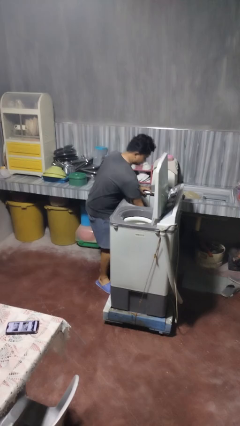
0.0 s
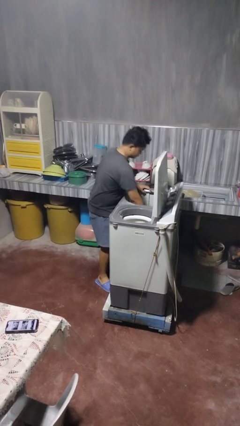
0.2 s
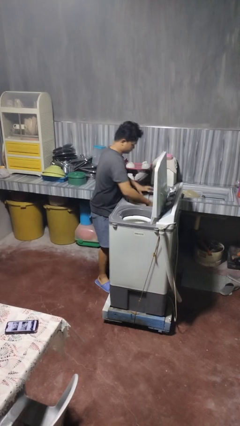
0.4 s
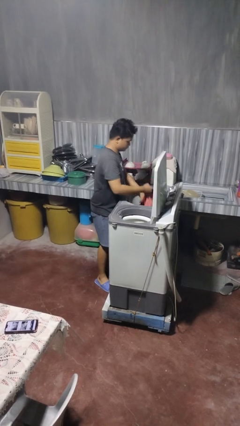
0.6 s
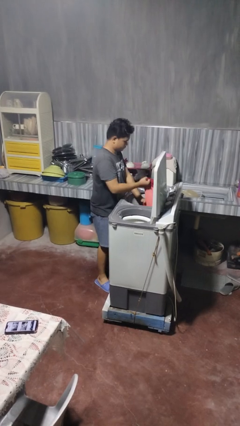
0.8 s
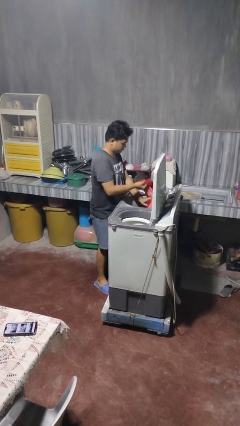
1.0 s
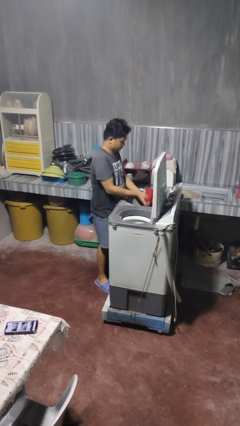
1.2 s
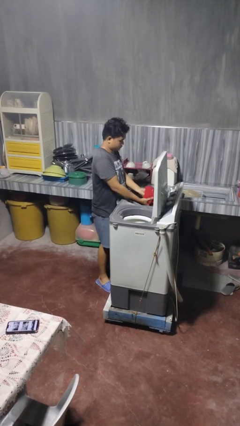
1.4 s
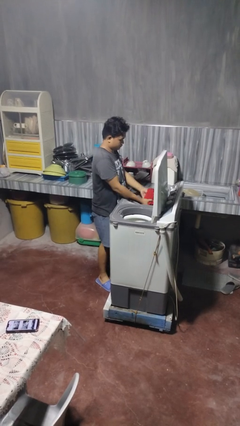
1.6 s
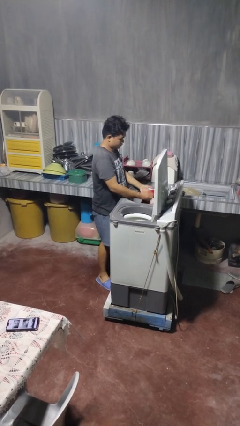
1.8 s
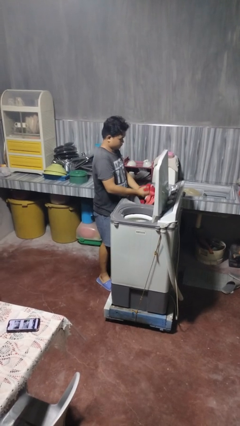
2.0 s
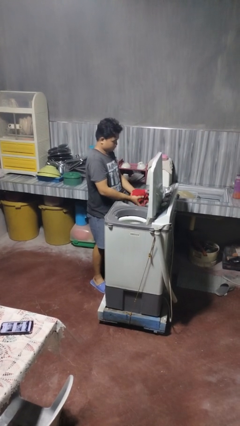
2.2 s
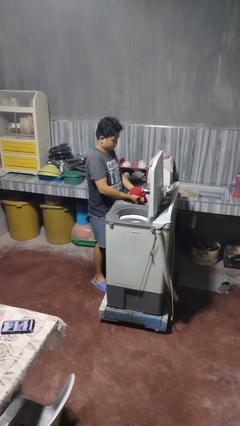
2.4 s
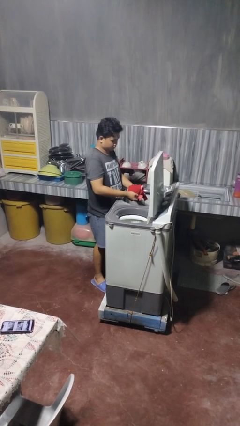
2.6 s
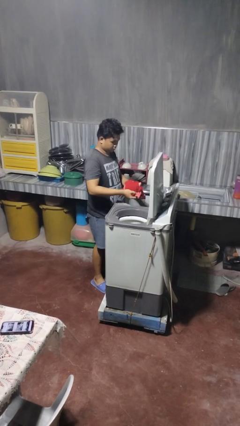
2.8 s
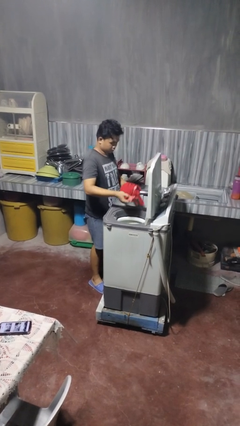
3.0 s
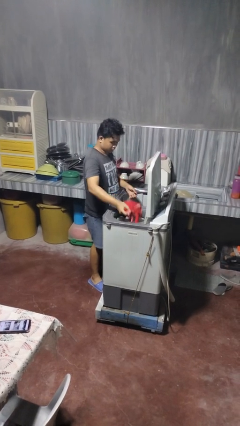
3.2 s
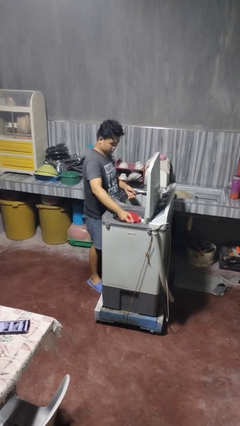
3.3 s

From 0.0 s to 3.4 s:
person unloads clotheswasher

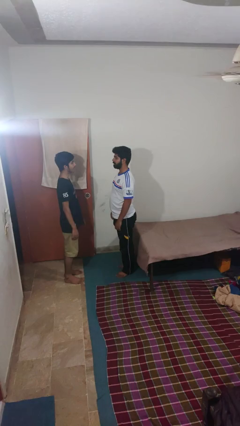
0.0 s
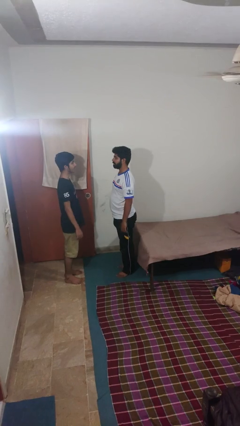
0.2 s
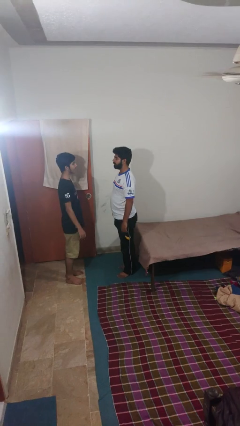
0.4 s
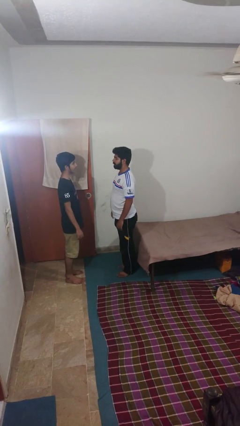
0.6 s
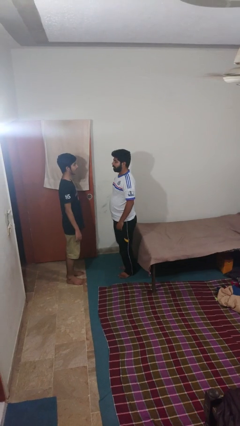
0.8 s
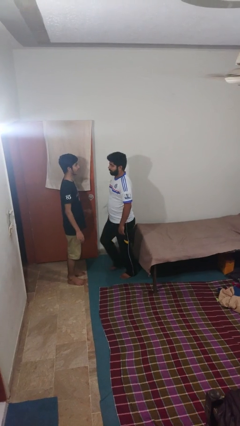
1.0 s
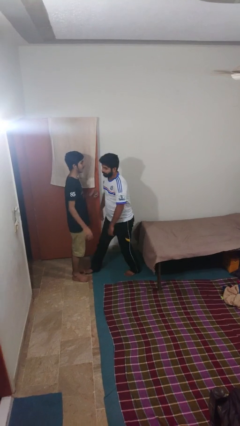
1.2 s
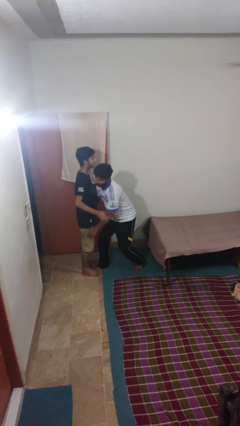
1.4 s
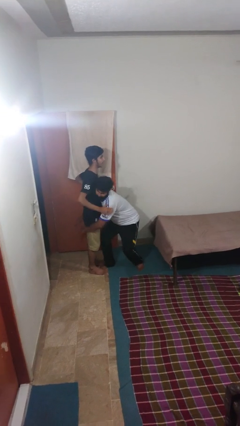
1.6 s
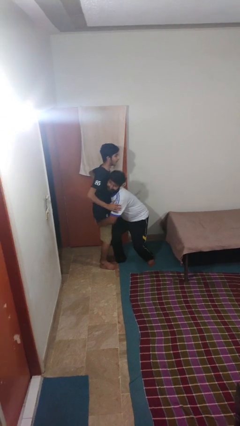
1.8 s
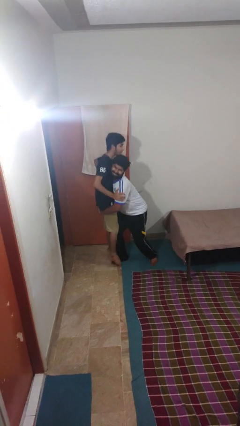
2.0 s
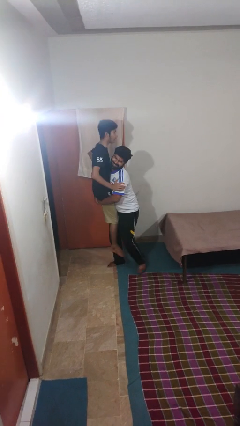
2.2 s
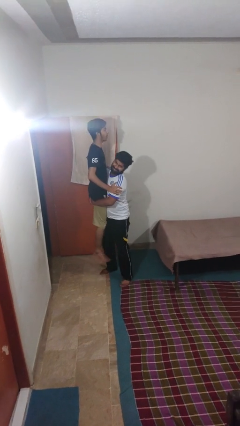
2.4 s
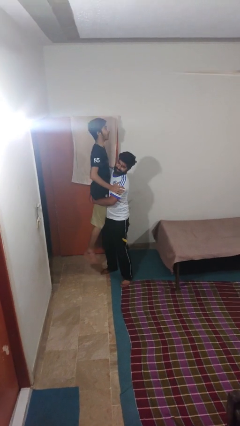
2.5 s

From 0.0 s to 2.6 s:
person picks up person

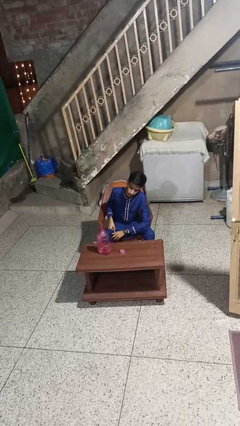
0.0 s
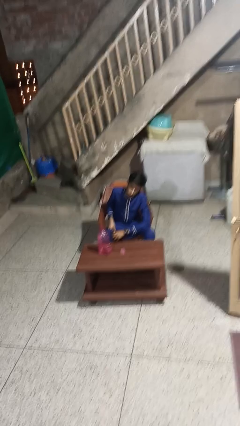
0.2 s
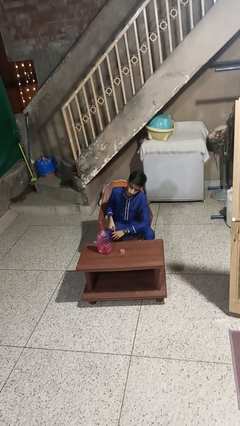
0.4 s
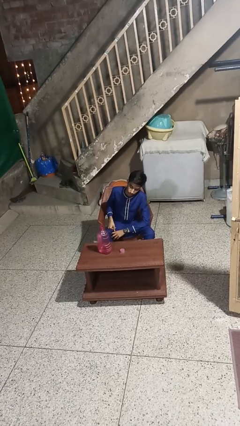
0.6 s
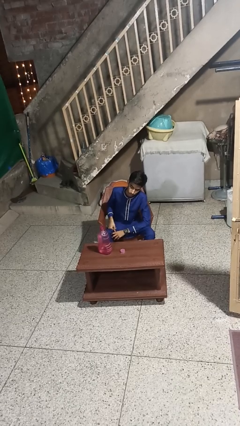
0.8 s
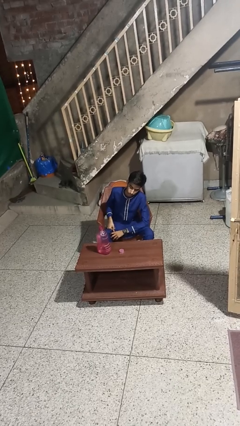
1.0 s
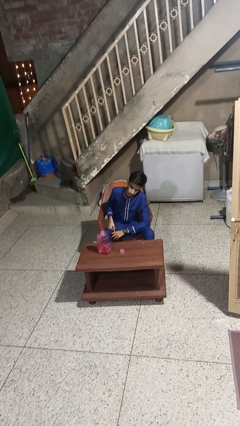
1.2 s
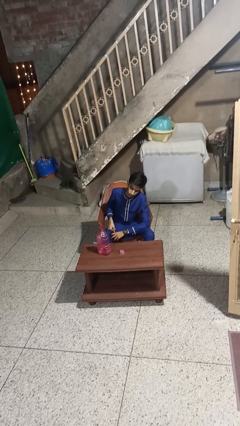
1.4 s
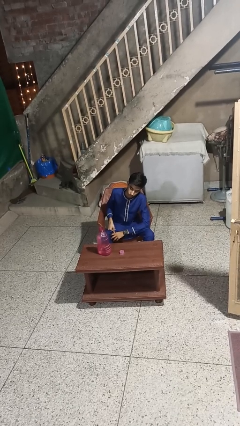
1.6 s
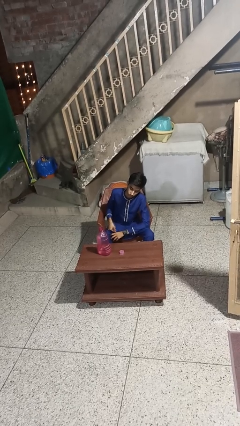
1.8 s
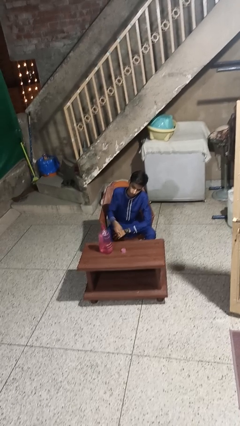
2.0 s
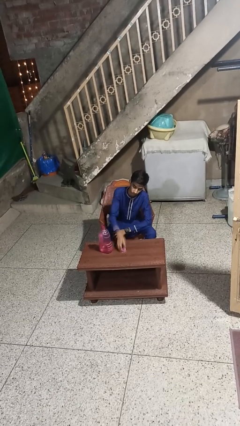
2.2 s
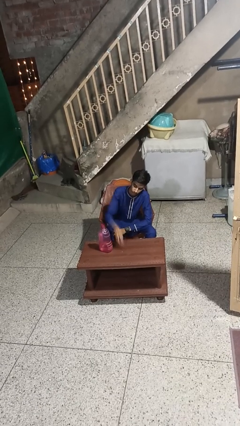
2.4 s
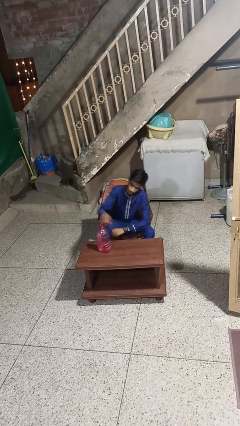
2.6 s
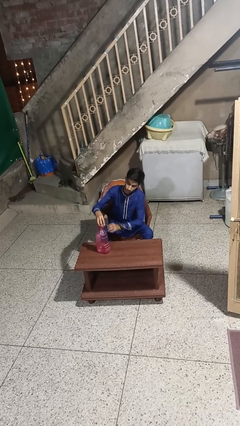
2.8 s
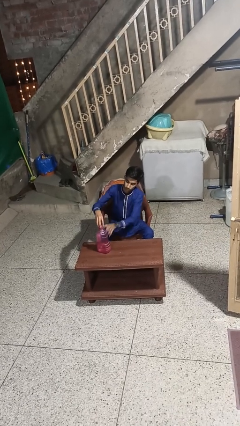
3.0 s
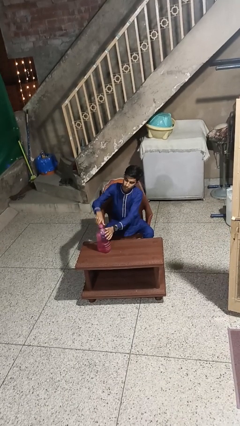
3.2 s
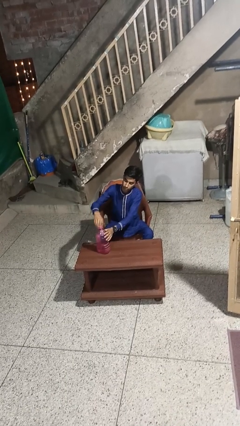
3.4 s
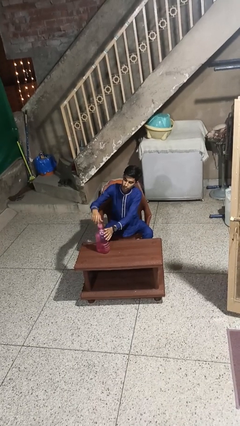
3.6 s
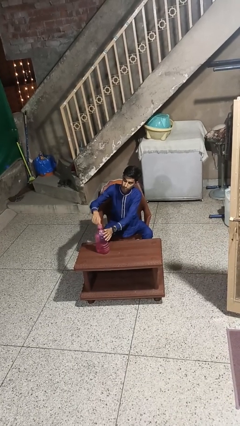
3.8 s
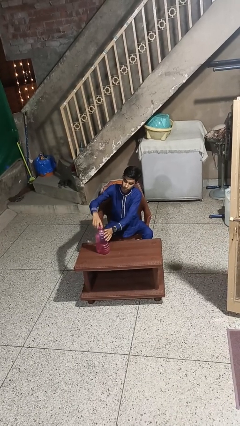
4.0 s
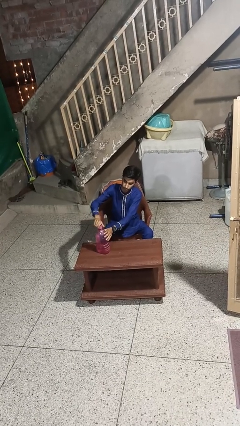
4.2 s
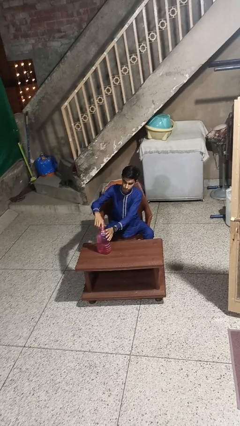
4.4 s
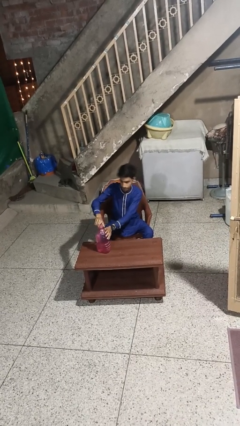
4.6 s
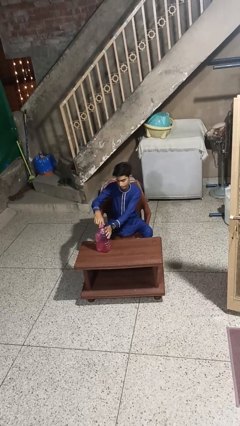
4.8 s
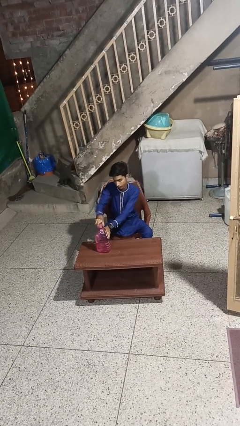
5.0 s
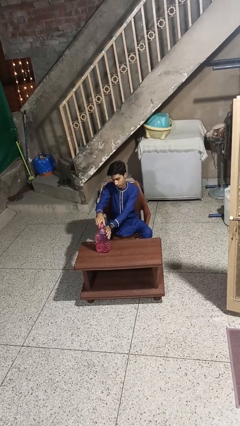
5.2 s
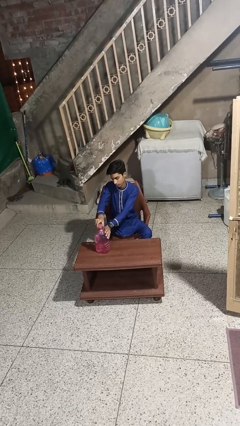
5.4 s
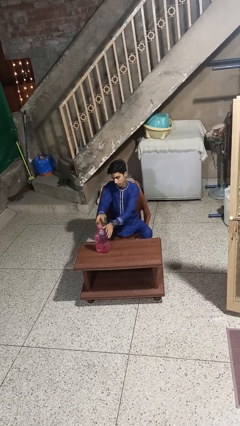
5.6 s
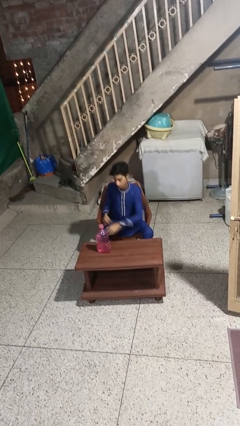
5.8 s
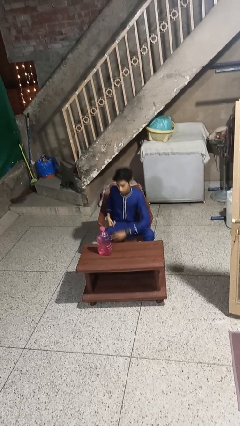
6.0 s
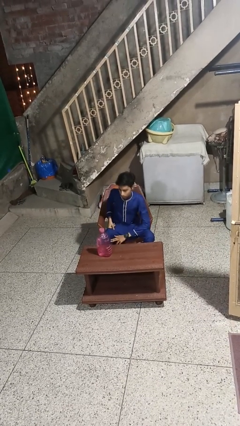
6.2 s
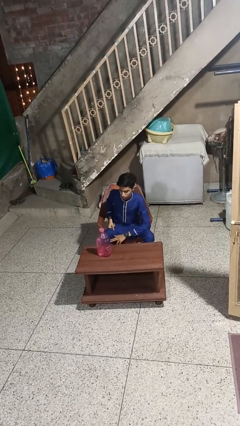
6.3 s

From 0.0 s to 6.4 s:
person screws lid to bottle

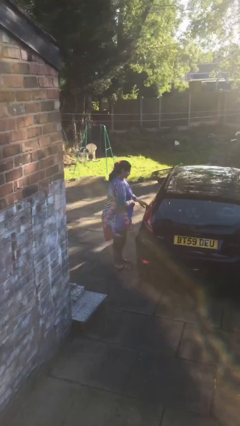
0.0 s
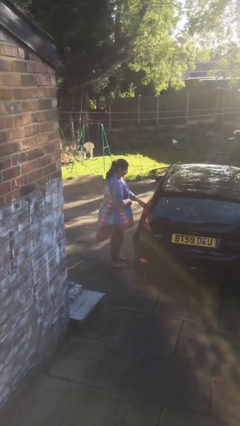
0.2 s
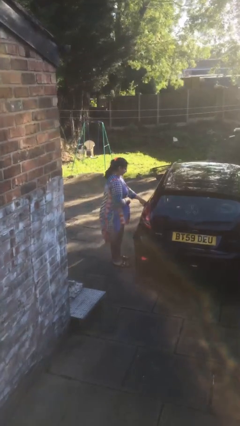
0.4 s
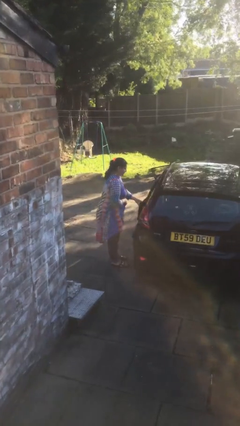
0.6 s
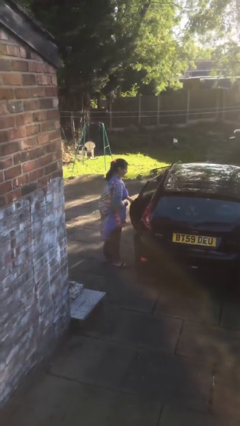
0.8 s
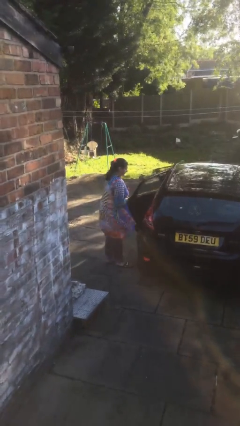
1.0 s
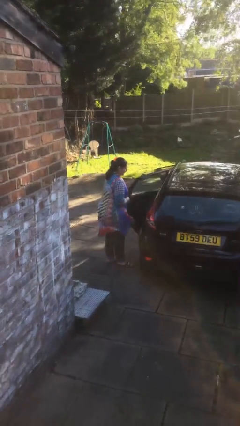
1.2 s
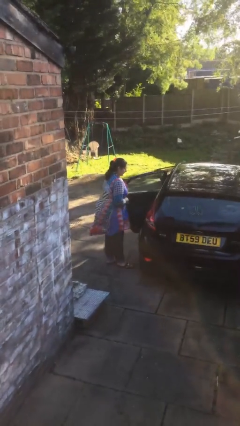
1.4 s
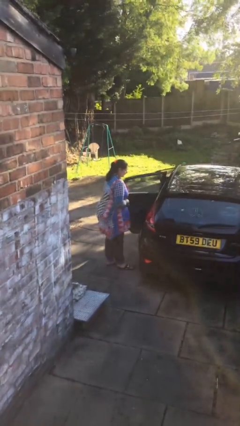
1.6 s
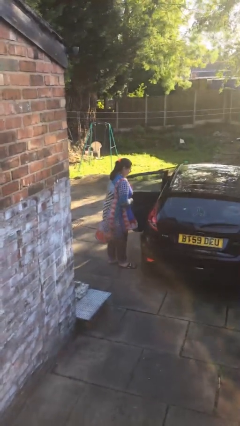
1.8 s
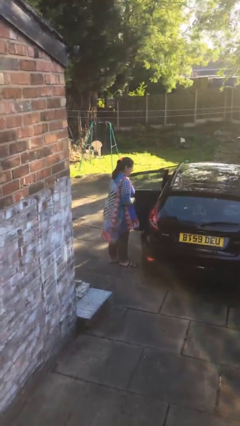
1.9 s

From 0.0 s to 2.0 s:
person opens car door

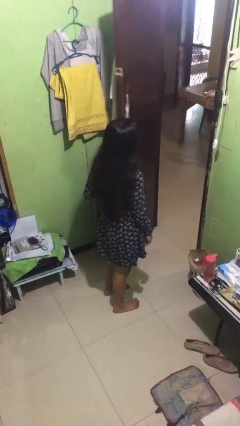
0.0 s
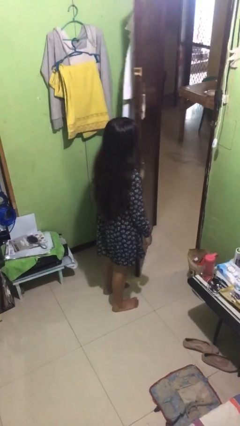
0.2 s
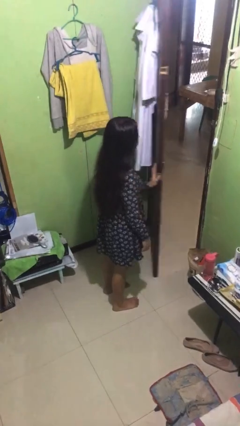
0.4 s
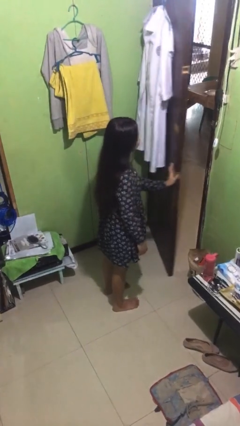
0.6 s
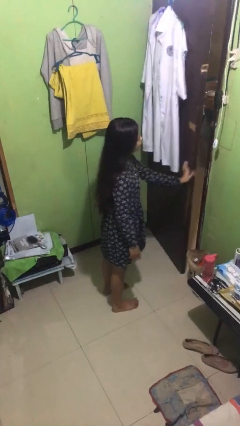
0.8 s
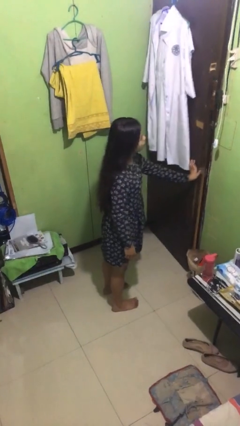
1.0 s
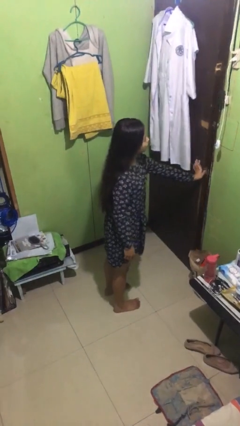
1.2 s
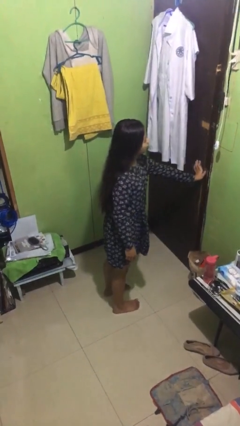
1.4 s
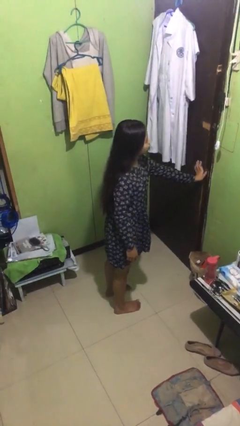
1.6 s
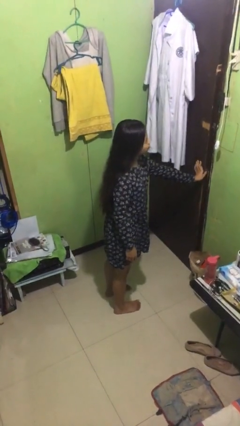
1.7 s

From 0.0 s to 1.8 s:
person closes facility door

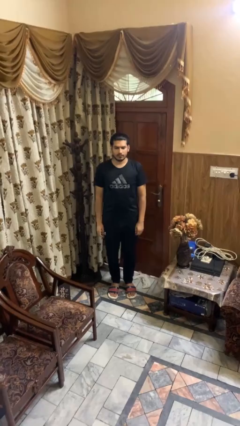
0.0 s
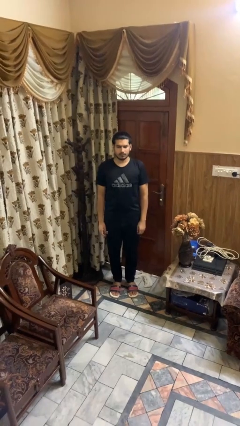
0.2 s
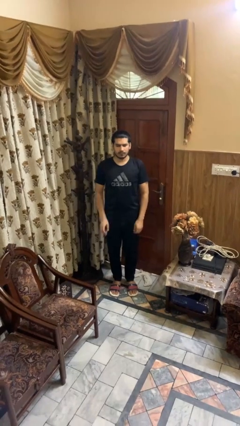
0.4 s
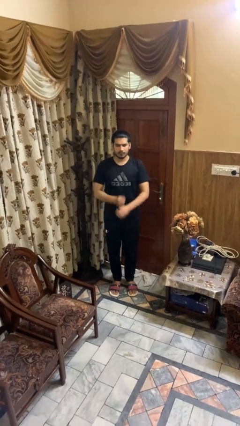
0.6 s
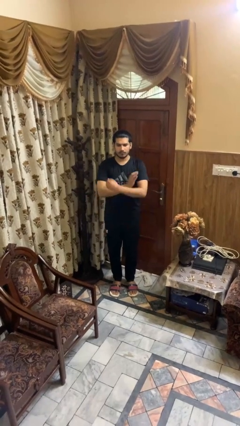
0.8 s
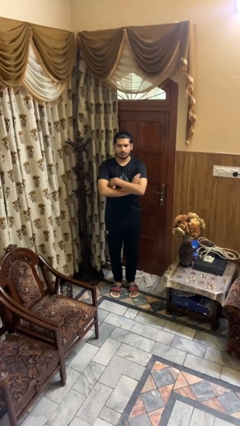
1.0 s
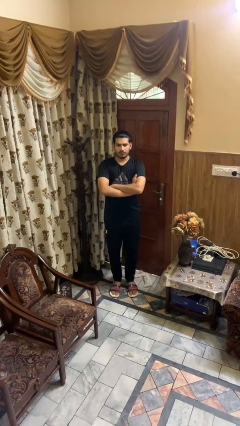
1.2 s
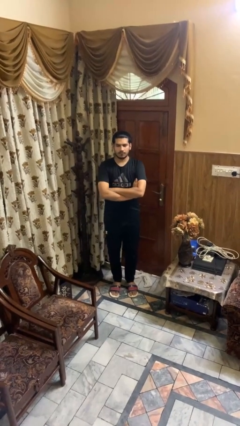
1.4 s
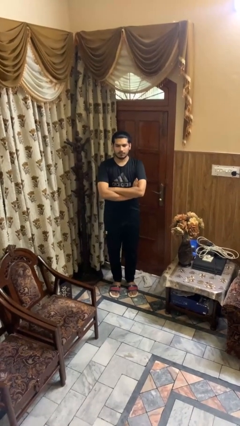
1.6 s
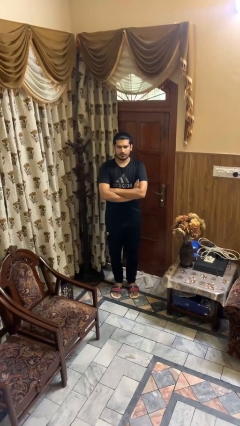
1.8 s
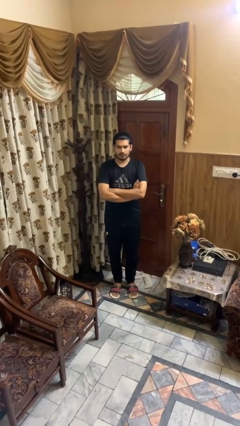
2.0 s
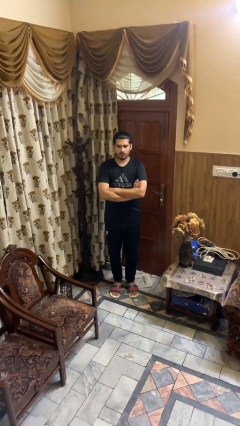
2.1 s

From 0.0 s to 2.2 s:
person crosses arms
